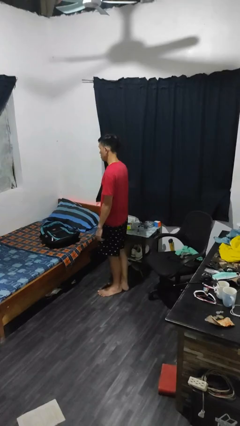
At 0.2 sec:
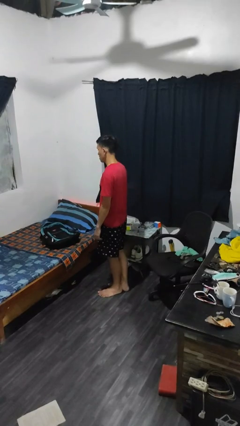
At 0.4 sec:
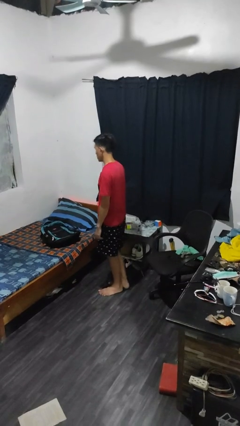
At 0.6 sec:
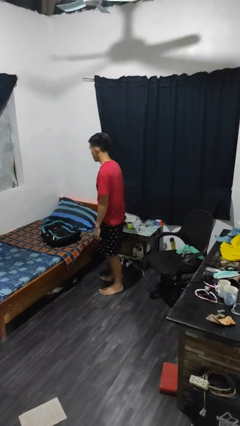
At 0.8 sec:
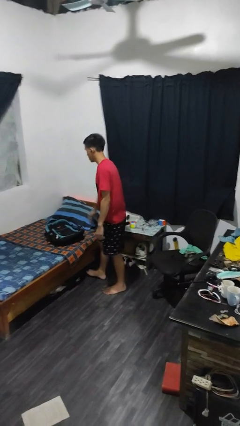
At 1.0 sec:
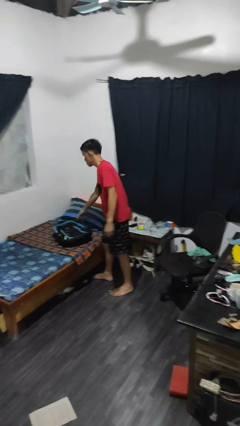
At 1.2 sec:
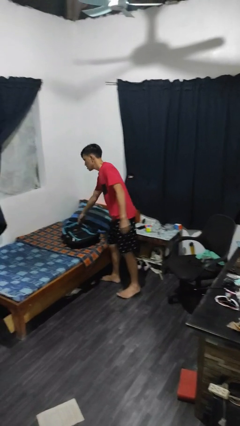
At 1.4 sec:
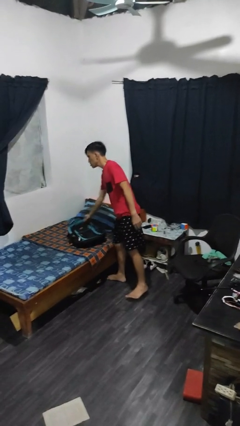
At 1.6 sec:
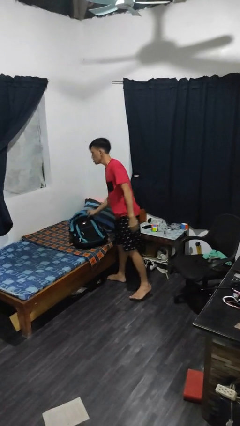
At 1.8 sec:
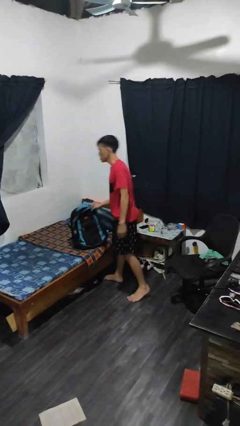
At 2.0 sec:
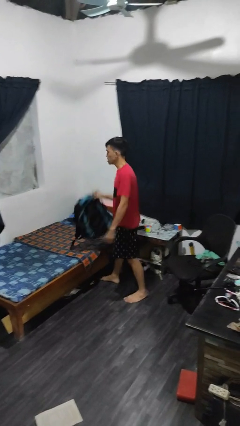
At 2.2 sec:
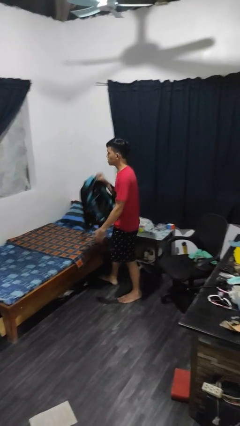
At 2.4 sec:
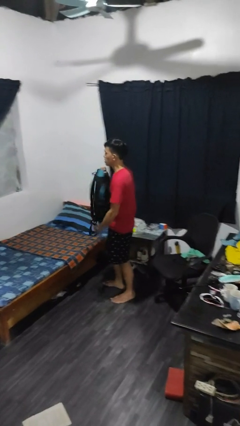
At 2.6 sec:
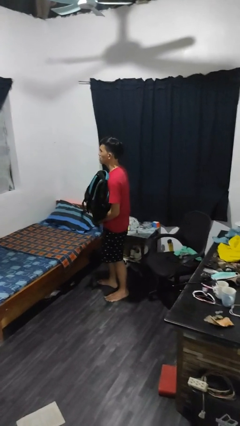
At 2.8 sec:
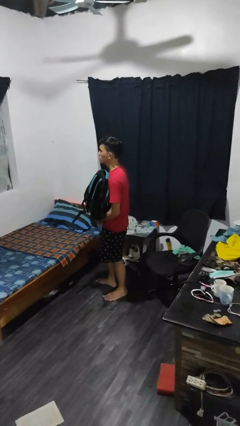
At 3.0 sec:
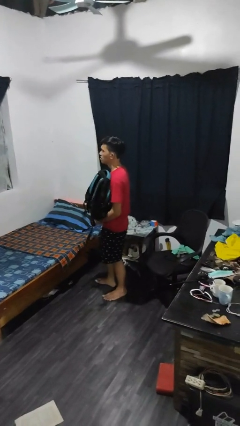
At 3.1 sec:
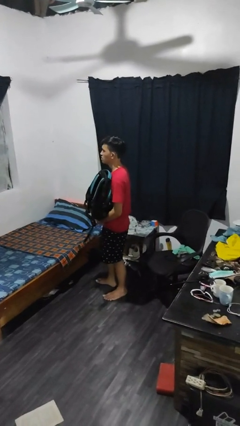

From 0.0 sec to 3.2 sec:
person picks up object from bed

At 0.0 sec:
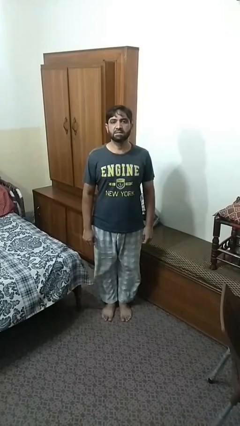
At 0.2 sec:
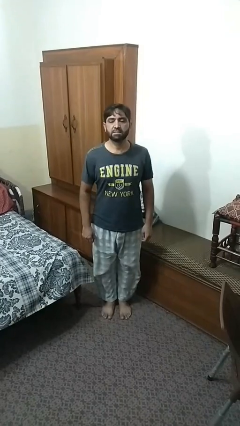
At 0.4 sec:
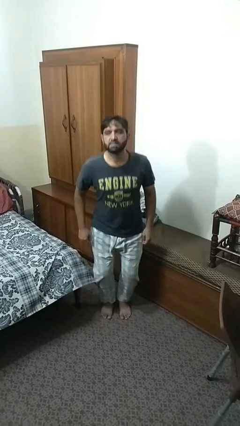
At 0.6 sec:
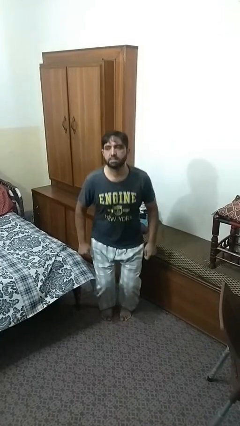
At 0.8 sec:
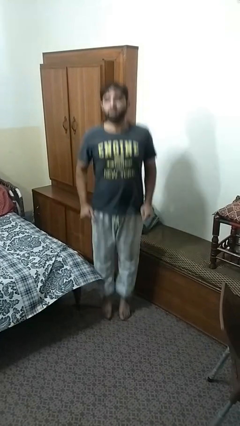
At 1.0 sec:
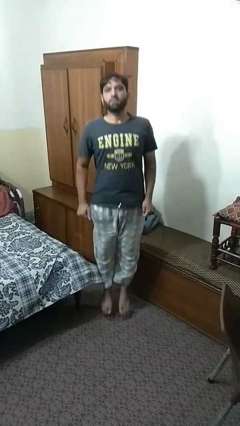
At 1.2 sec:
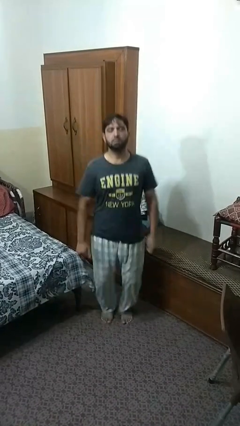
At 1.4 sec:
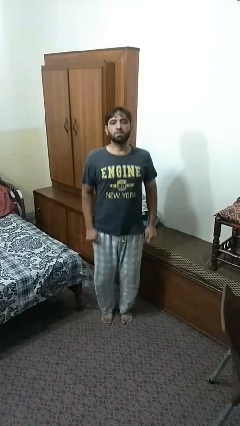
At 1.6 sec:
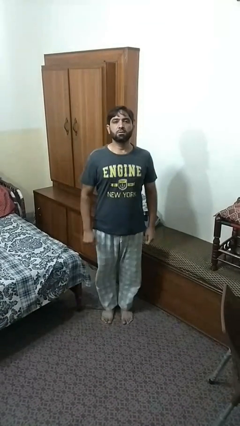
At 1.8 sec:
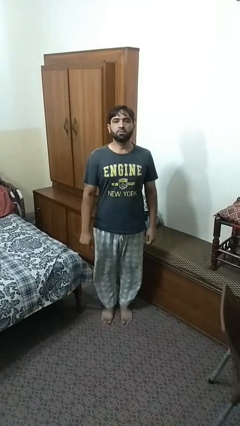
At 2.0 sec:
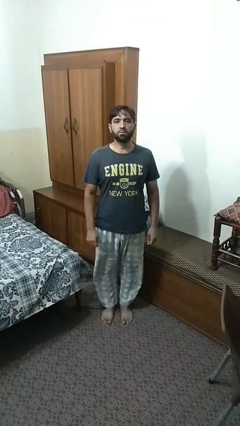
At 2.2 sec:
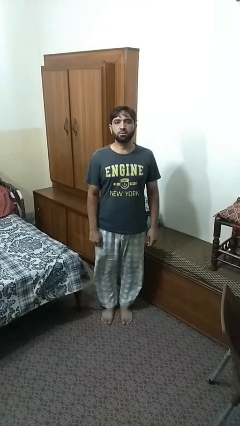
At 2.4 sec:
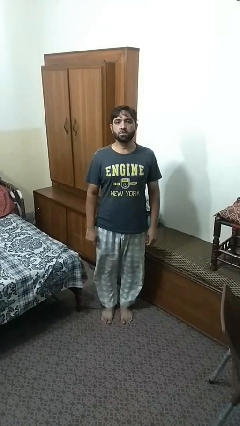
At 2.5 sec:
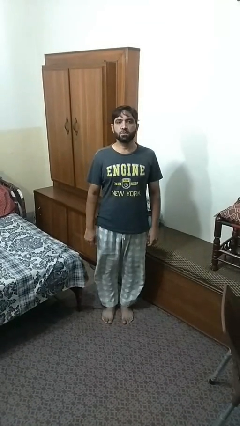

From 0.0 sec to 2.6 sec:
person jumps

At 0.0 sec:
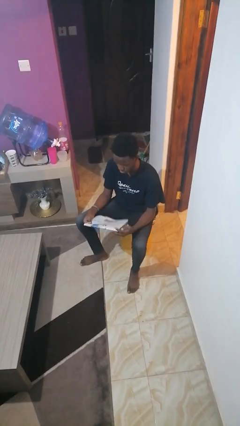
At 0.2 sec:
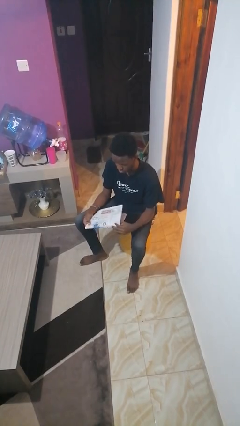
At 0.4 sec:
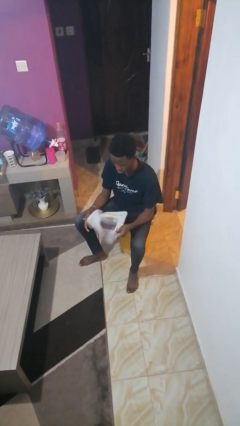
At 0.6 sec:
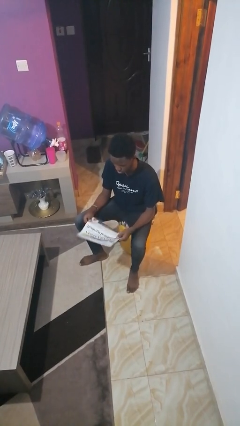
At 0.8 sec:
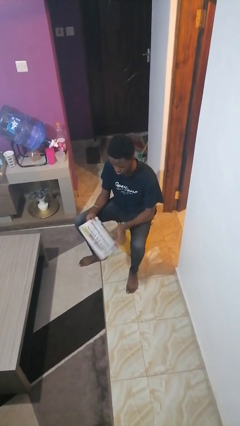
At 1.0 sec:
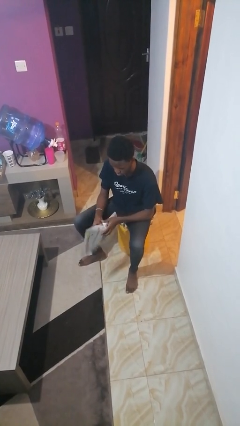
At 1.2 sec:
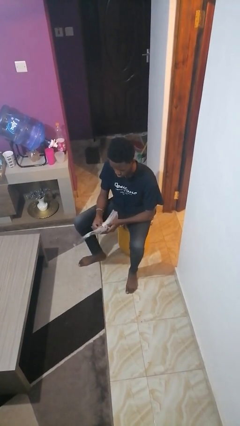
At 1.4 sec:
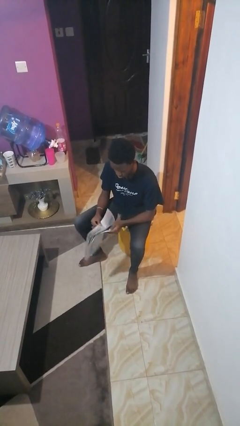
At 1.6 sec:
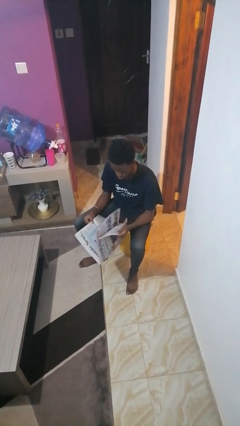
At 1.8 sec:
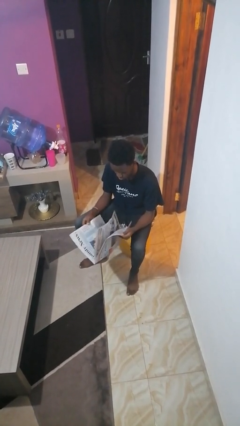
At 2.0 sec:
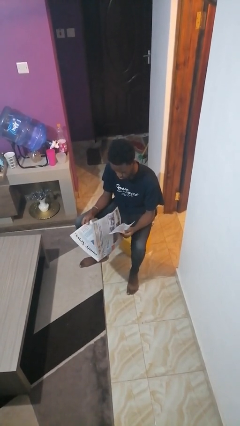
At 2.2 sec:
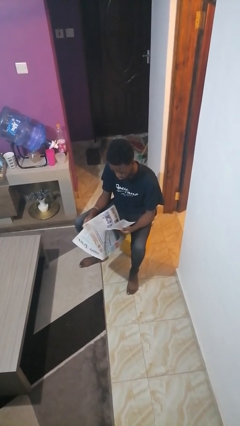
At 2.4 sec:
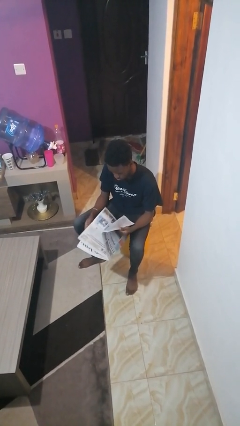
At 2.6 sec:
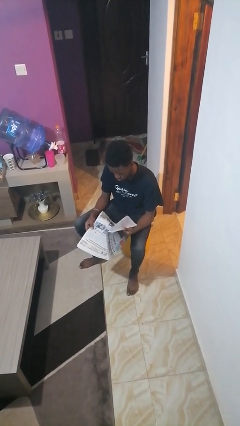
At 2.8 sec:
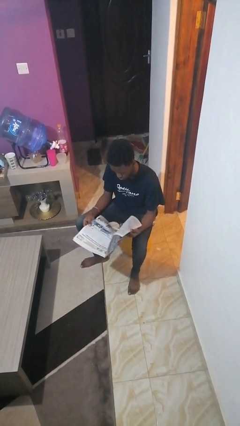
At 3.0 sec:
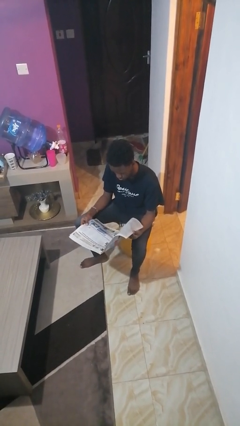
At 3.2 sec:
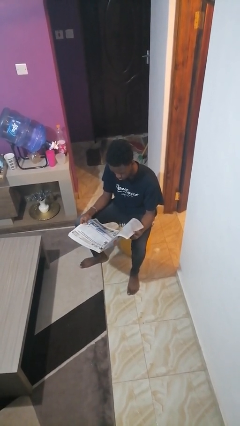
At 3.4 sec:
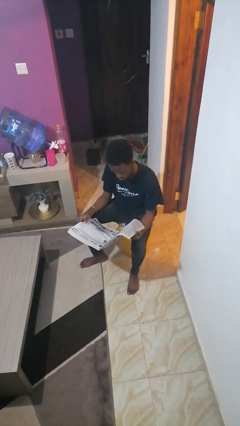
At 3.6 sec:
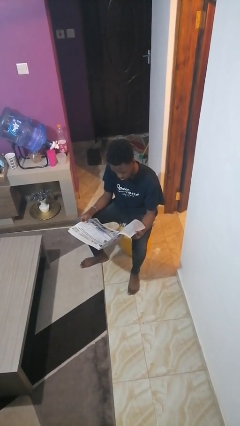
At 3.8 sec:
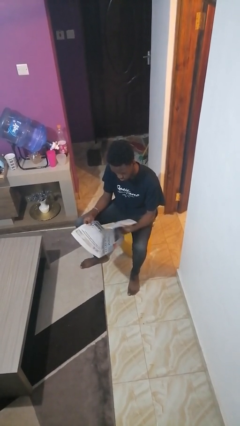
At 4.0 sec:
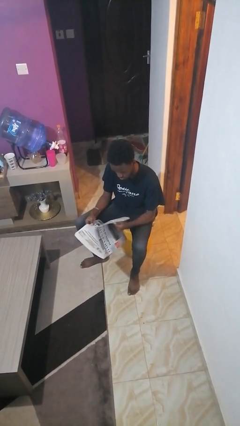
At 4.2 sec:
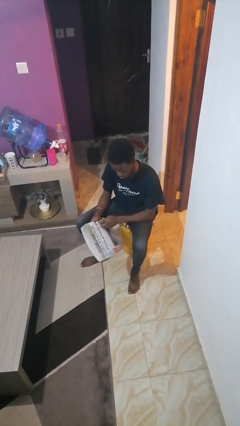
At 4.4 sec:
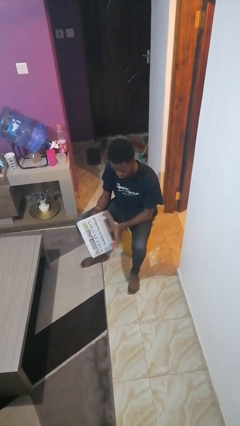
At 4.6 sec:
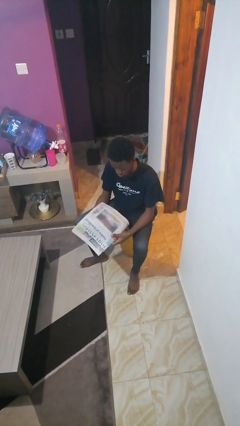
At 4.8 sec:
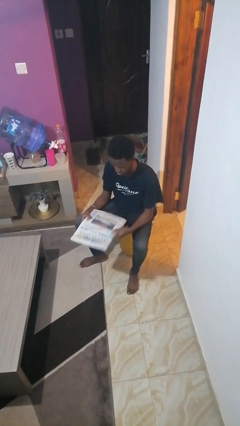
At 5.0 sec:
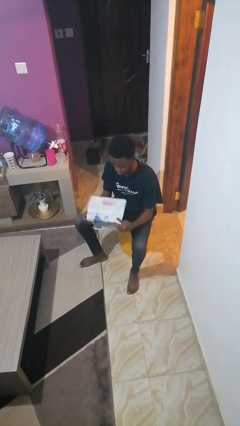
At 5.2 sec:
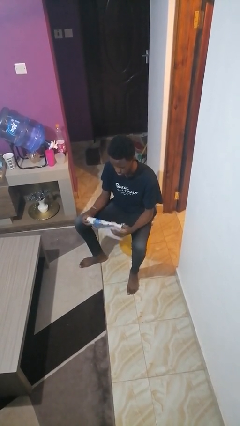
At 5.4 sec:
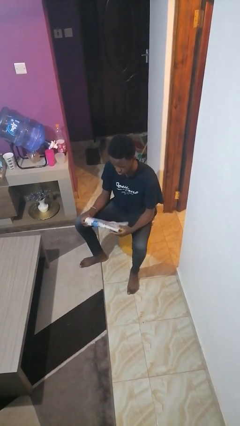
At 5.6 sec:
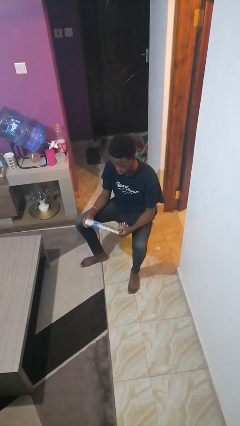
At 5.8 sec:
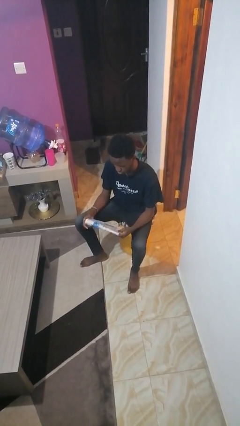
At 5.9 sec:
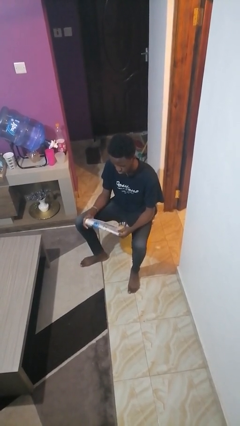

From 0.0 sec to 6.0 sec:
person reads newspaper

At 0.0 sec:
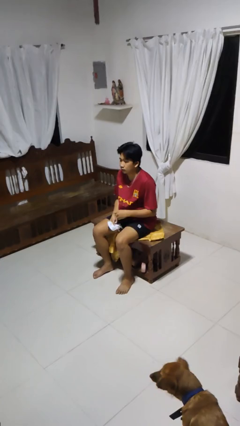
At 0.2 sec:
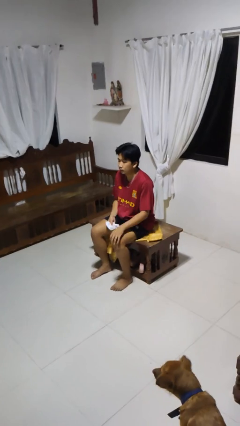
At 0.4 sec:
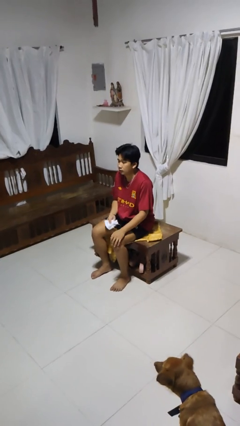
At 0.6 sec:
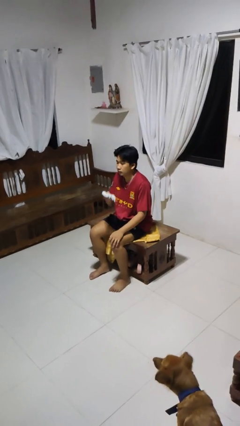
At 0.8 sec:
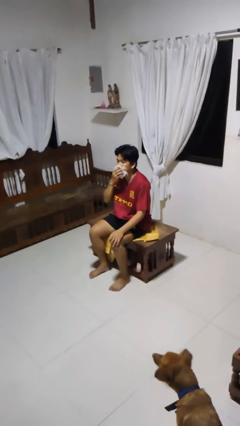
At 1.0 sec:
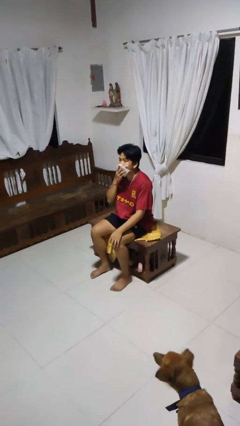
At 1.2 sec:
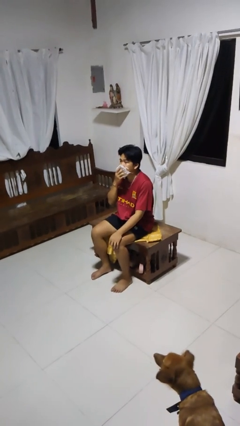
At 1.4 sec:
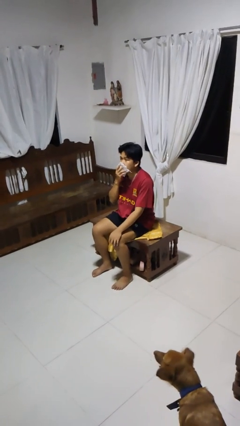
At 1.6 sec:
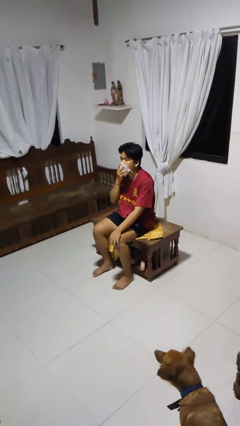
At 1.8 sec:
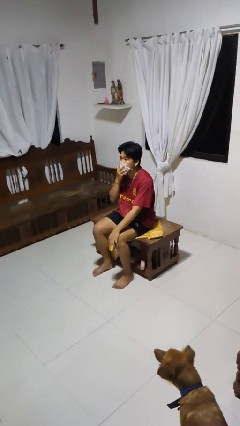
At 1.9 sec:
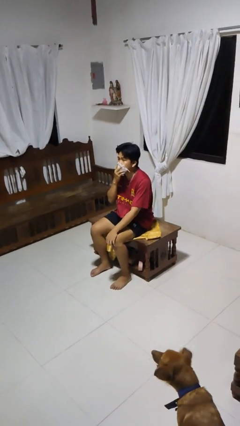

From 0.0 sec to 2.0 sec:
person wipes mouth with napkin

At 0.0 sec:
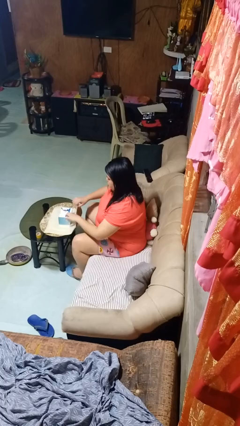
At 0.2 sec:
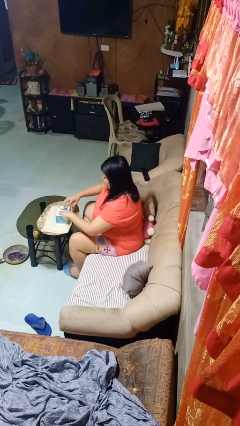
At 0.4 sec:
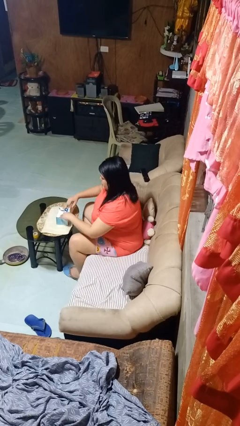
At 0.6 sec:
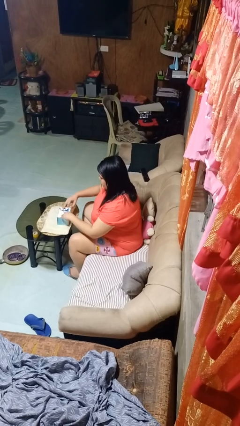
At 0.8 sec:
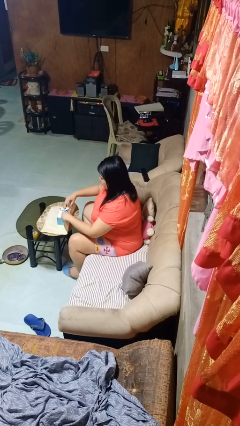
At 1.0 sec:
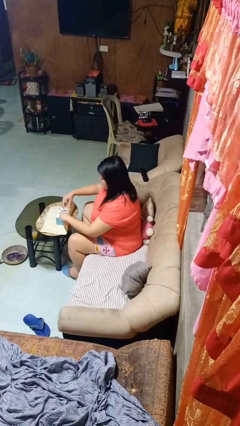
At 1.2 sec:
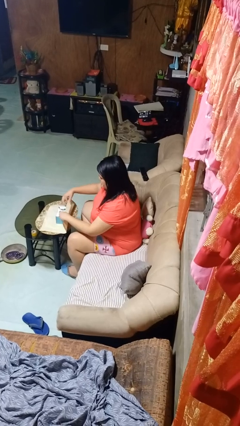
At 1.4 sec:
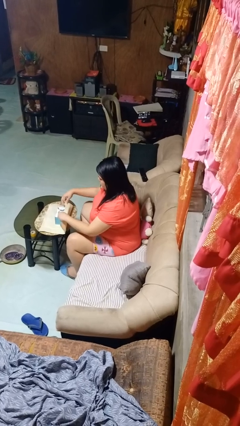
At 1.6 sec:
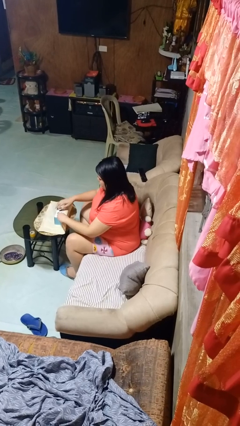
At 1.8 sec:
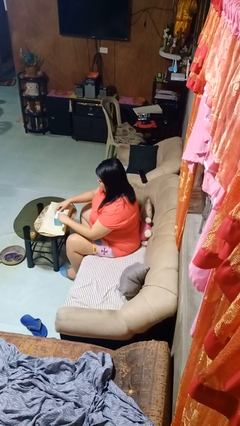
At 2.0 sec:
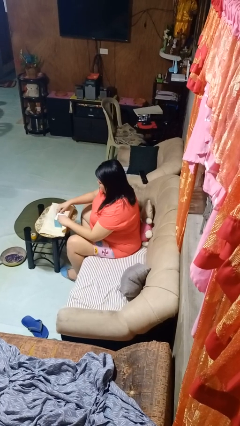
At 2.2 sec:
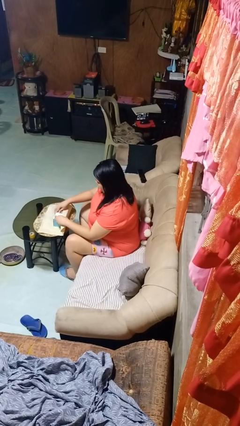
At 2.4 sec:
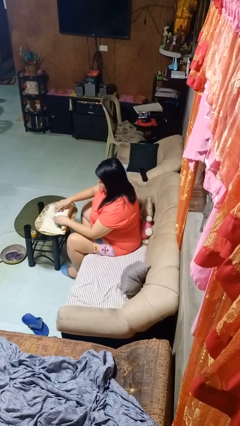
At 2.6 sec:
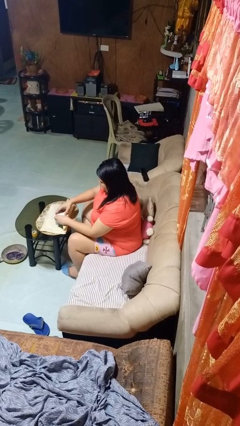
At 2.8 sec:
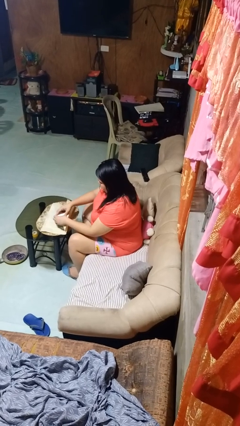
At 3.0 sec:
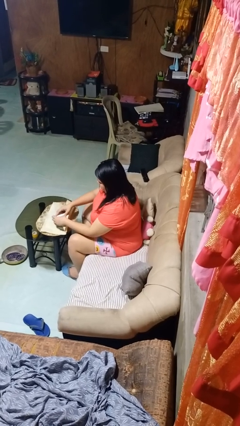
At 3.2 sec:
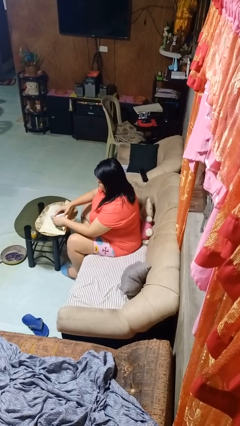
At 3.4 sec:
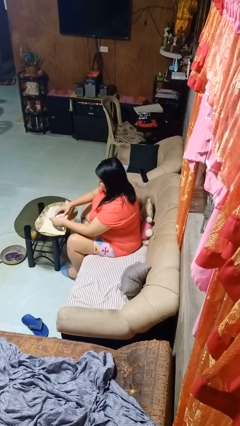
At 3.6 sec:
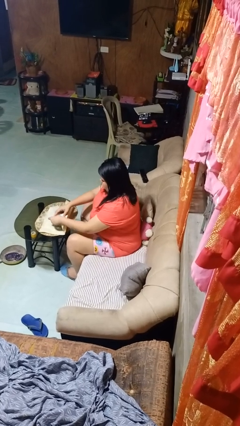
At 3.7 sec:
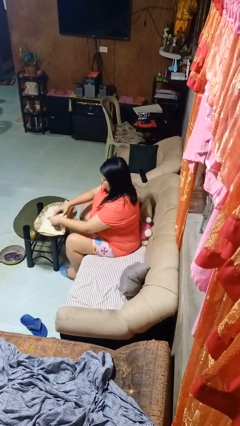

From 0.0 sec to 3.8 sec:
person wraps box
